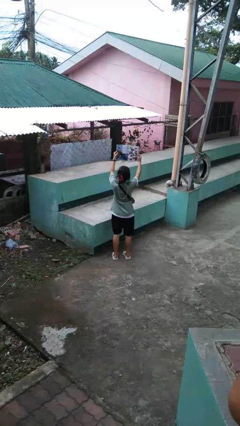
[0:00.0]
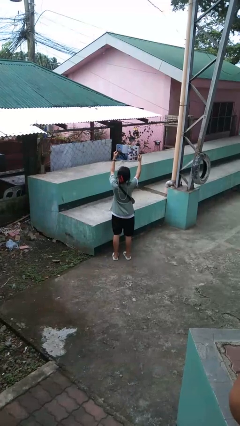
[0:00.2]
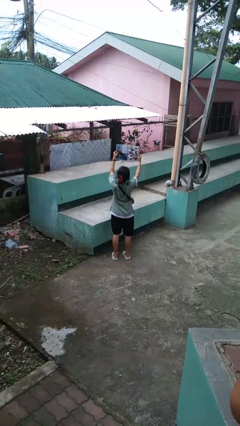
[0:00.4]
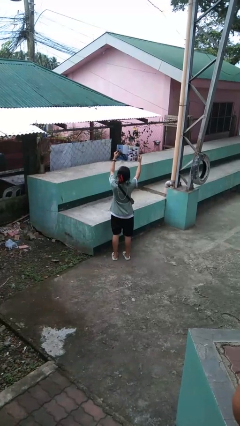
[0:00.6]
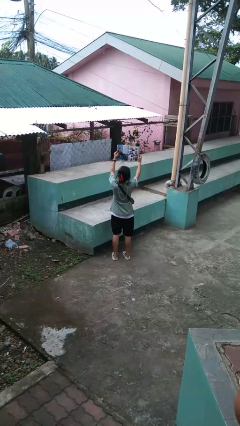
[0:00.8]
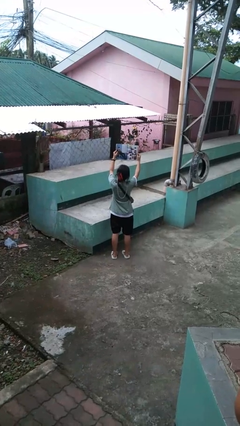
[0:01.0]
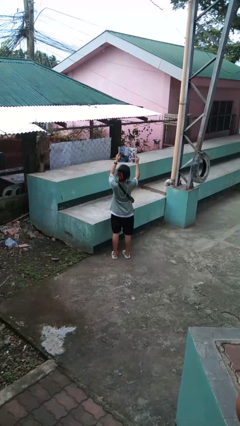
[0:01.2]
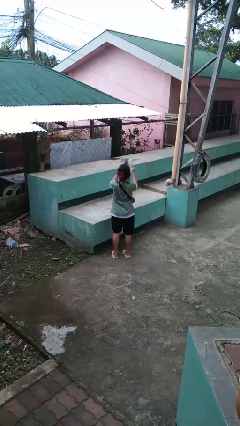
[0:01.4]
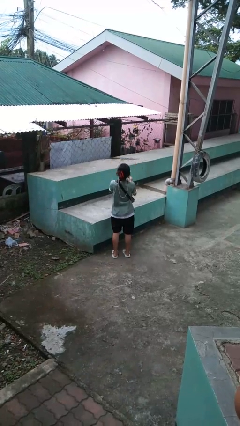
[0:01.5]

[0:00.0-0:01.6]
person reads magazine

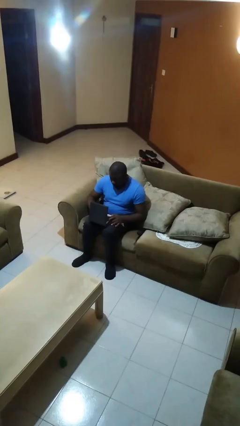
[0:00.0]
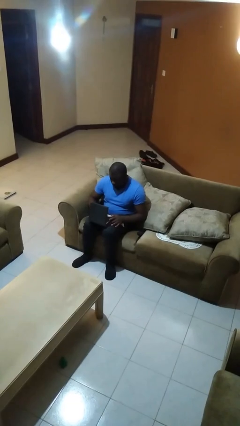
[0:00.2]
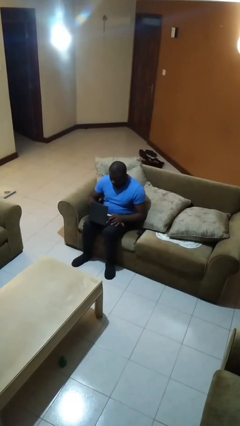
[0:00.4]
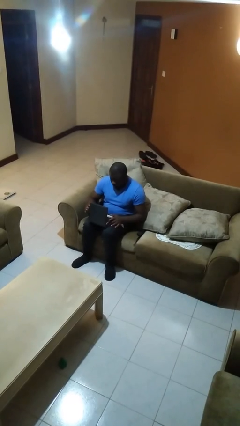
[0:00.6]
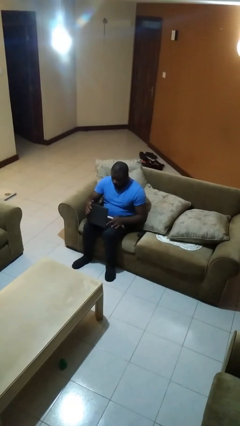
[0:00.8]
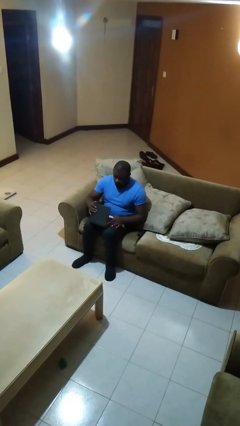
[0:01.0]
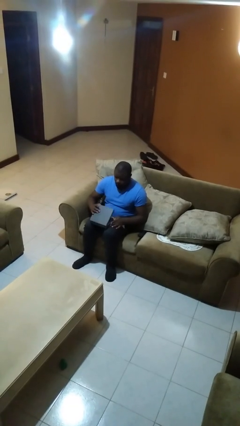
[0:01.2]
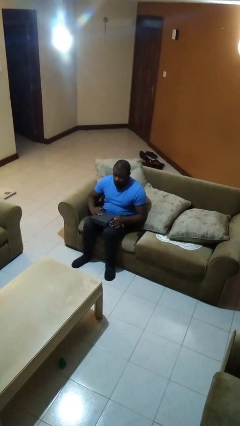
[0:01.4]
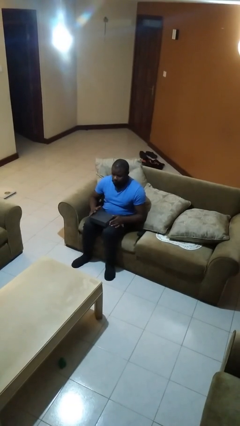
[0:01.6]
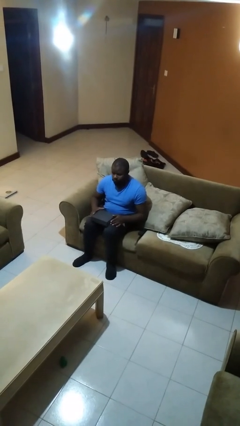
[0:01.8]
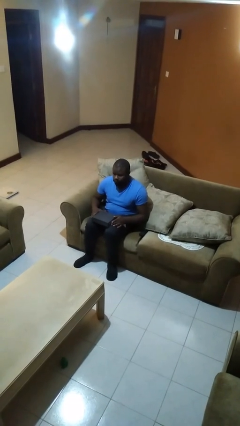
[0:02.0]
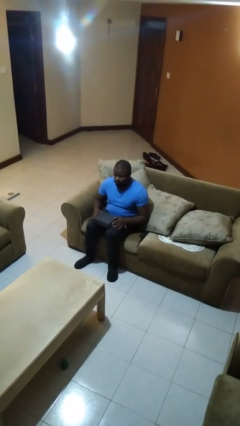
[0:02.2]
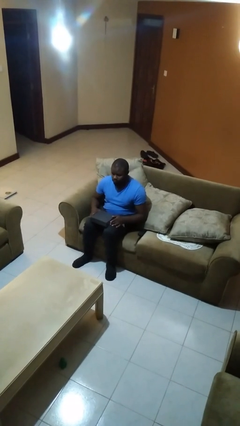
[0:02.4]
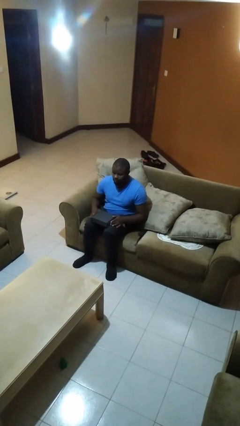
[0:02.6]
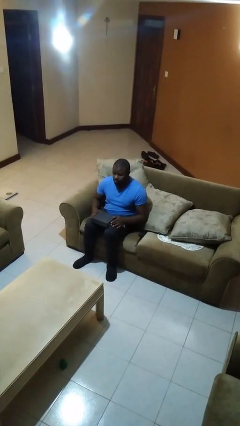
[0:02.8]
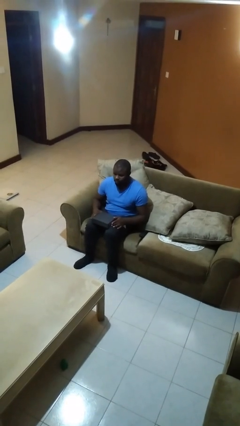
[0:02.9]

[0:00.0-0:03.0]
person closes jewelry box

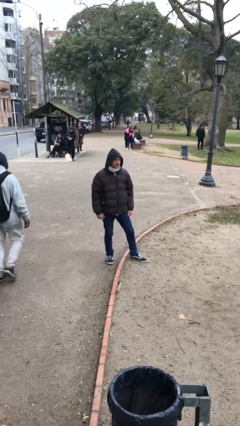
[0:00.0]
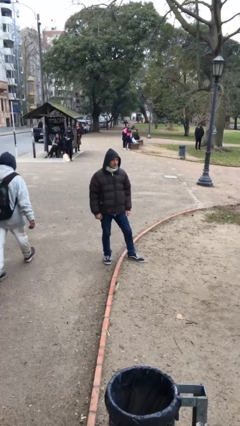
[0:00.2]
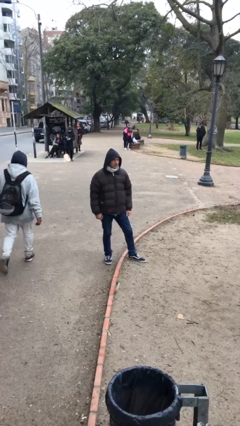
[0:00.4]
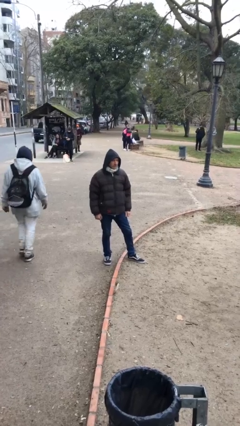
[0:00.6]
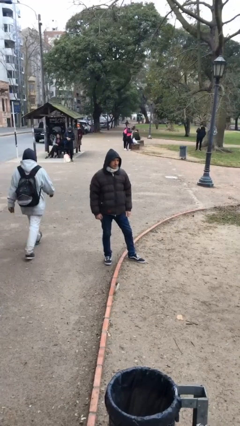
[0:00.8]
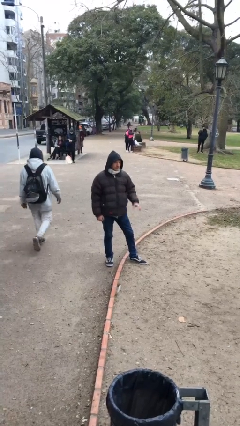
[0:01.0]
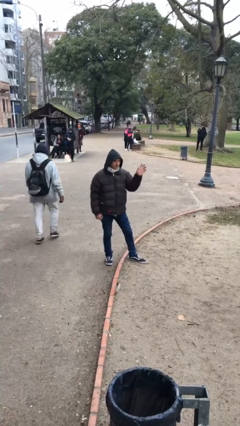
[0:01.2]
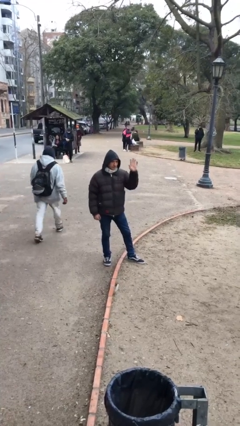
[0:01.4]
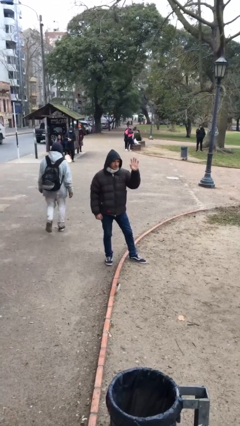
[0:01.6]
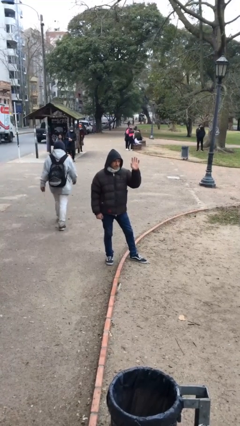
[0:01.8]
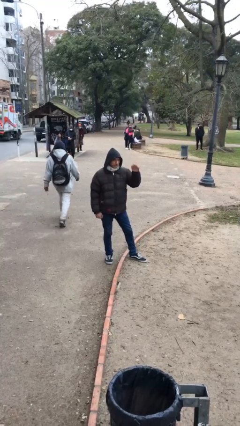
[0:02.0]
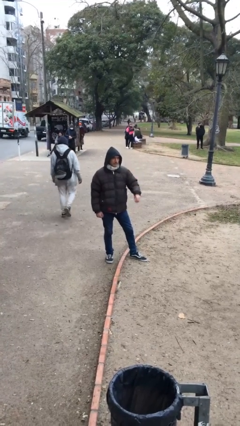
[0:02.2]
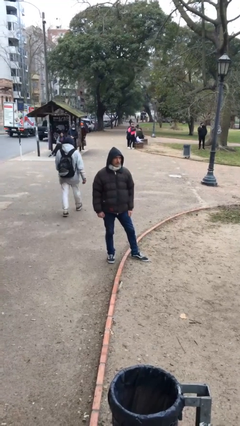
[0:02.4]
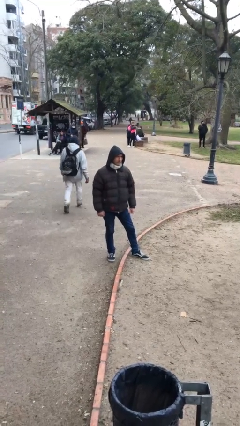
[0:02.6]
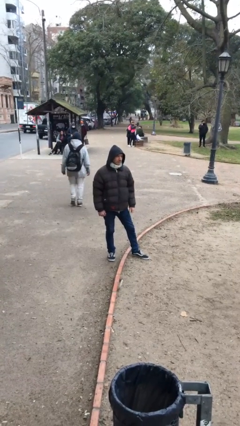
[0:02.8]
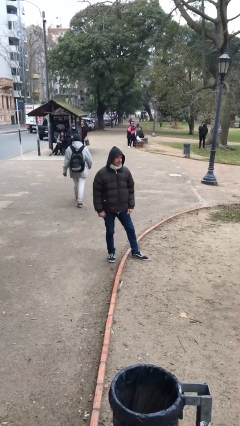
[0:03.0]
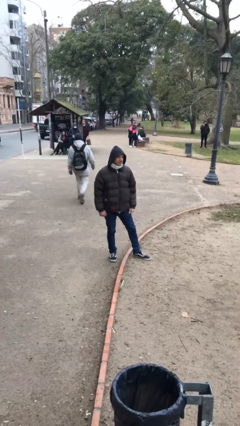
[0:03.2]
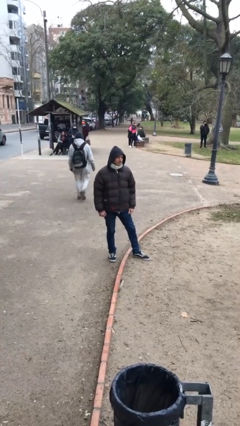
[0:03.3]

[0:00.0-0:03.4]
person waves at person

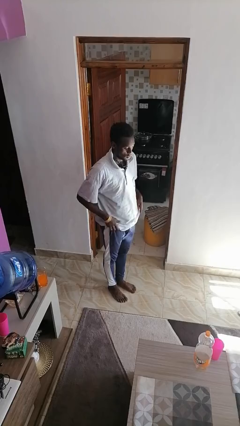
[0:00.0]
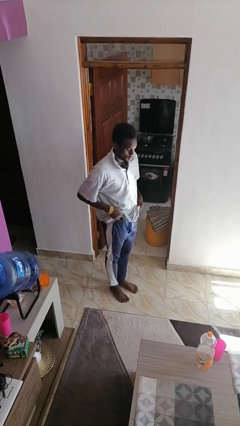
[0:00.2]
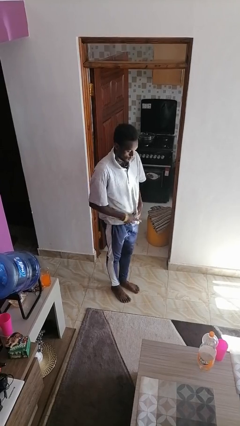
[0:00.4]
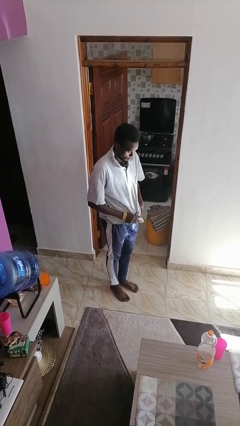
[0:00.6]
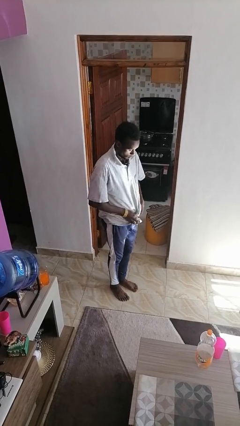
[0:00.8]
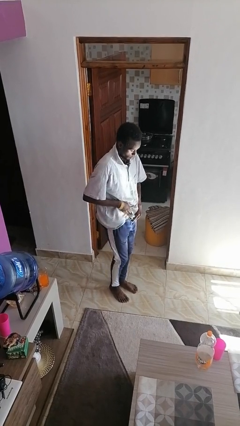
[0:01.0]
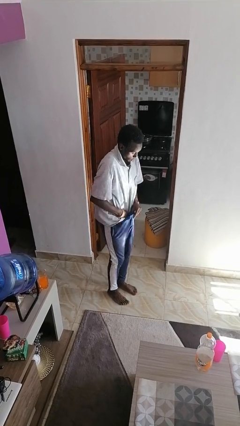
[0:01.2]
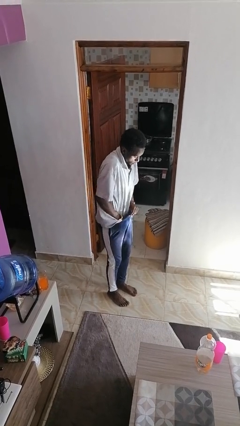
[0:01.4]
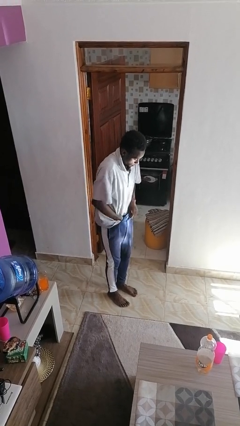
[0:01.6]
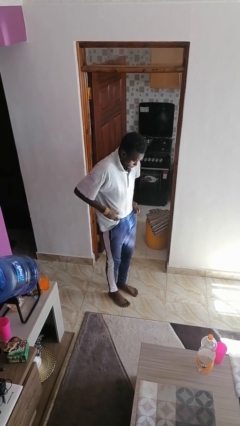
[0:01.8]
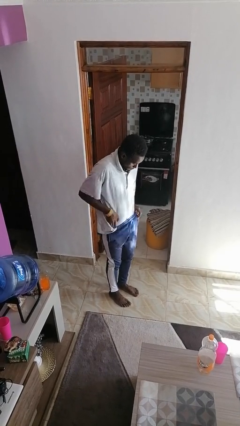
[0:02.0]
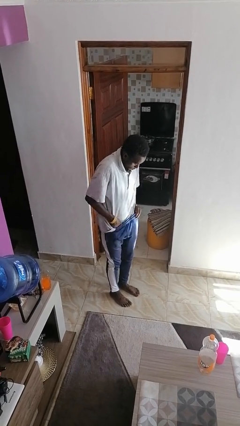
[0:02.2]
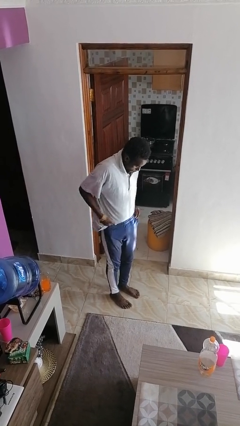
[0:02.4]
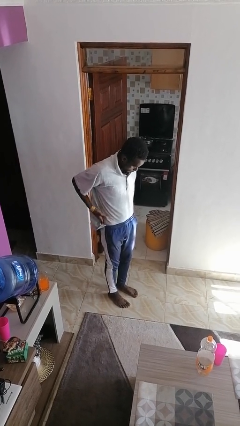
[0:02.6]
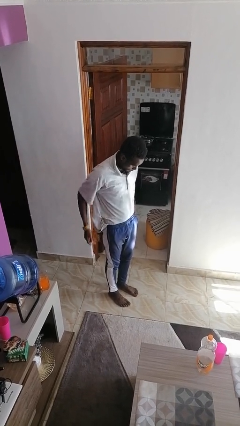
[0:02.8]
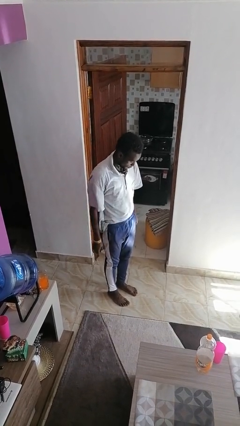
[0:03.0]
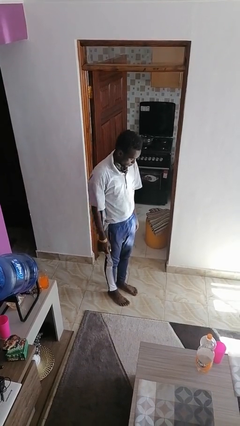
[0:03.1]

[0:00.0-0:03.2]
person tucks in shirt

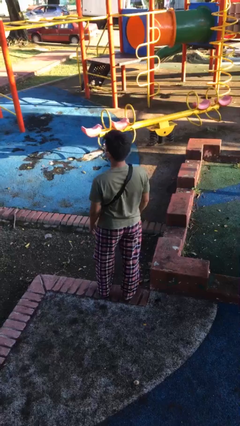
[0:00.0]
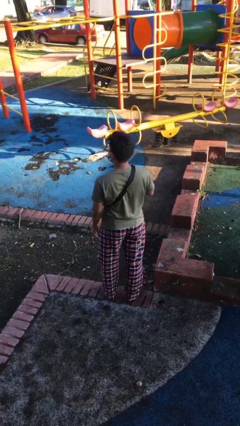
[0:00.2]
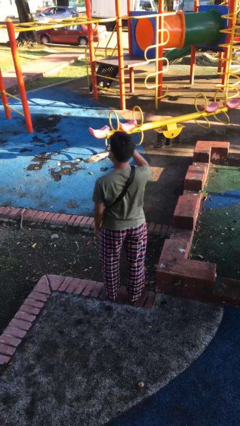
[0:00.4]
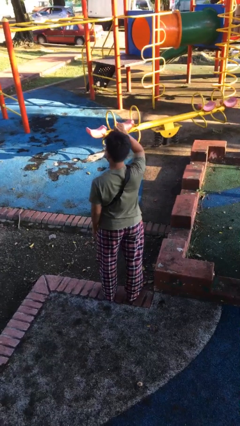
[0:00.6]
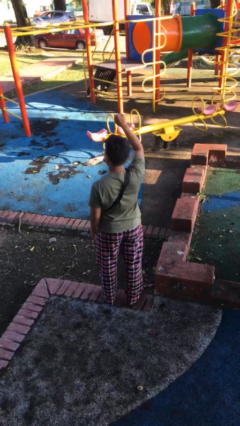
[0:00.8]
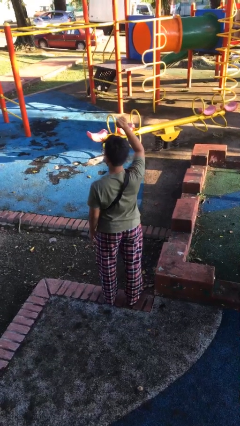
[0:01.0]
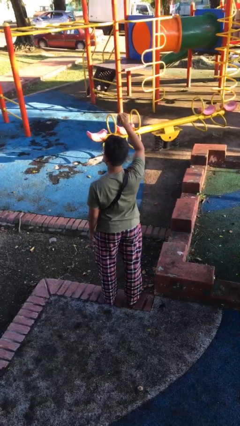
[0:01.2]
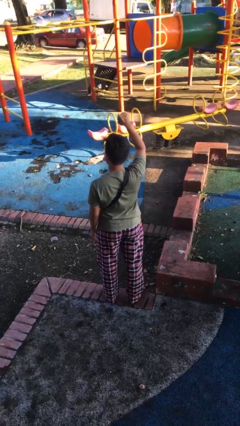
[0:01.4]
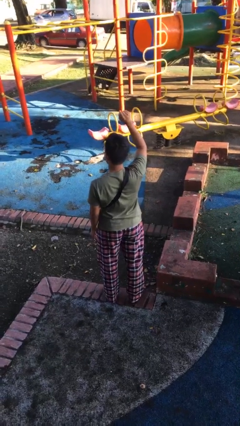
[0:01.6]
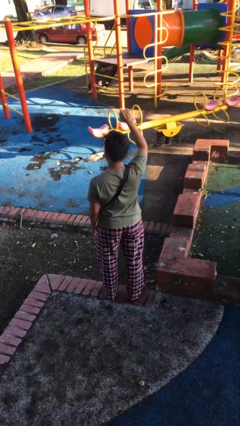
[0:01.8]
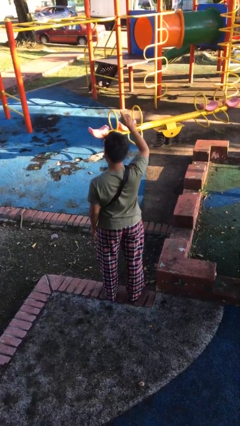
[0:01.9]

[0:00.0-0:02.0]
person gestures number one

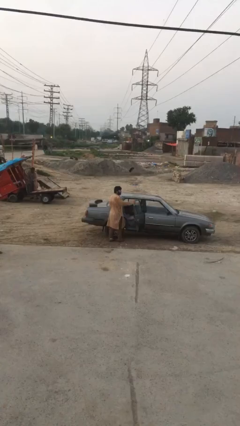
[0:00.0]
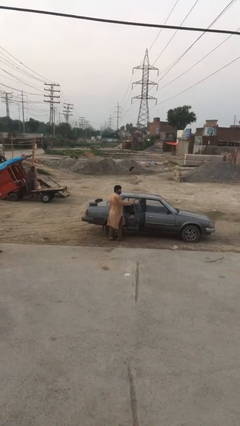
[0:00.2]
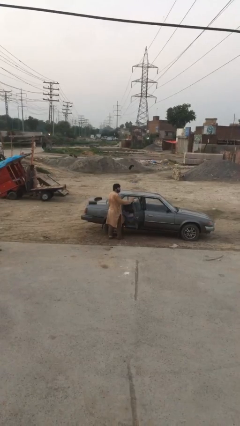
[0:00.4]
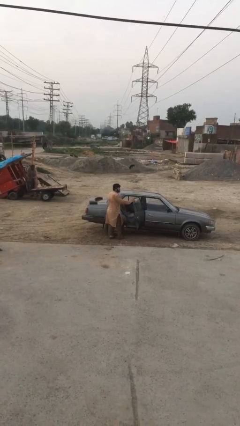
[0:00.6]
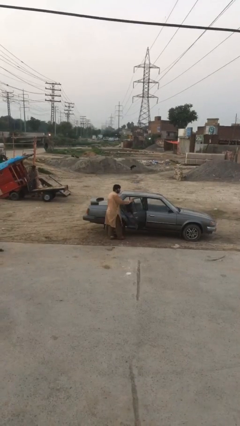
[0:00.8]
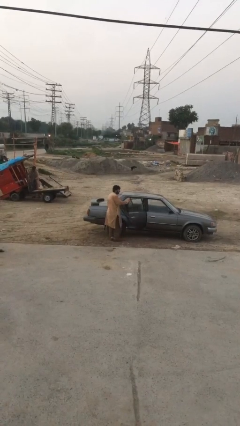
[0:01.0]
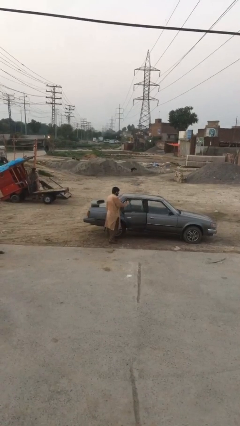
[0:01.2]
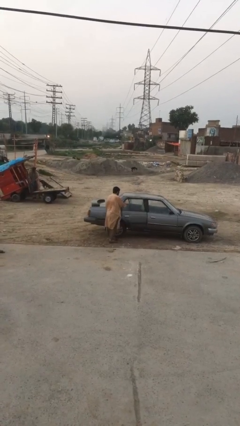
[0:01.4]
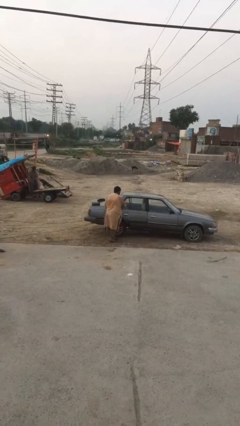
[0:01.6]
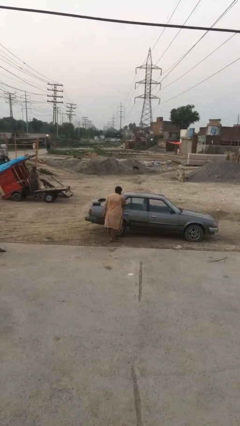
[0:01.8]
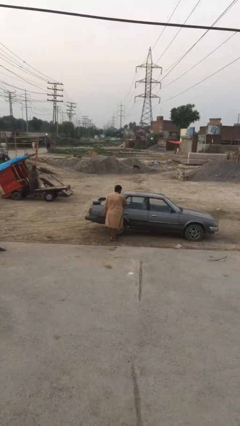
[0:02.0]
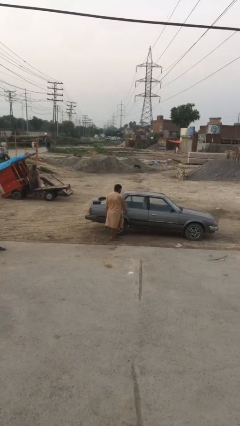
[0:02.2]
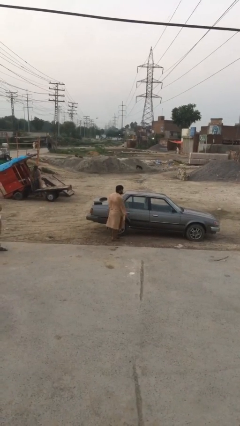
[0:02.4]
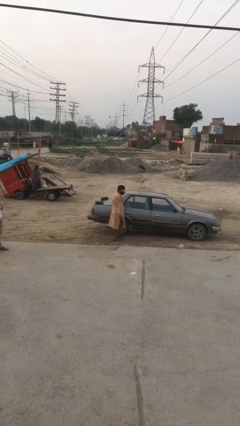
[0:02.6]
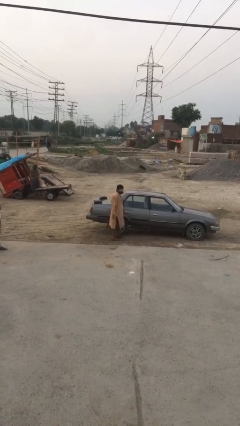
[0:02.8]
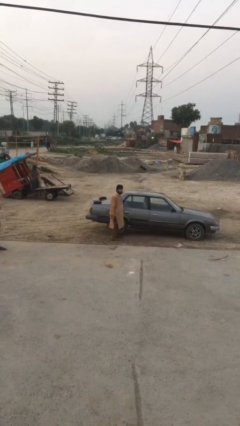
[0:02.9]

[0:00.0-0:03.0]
person closes car door

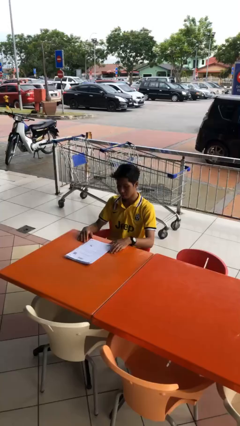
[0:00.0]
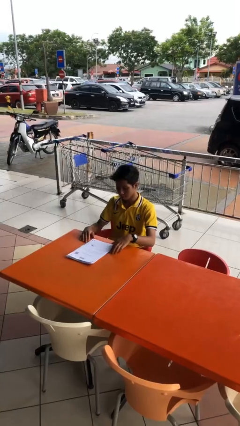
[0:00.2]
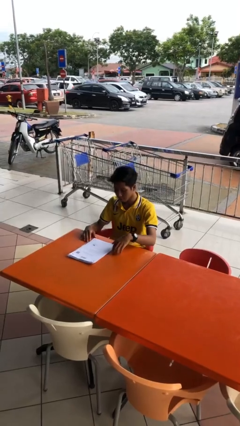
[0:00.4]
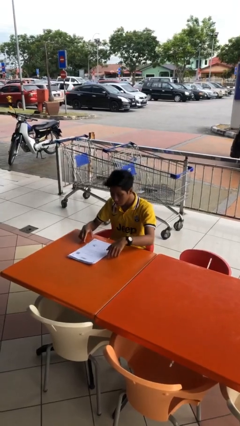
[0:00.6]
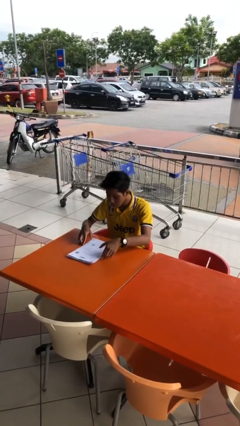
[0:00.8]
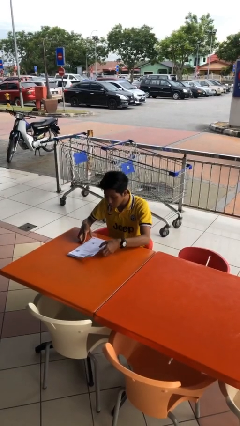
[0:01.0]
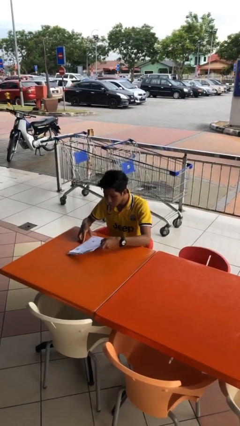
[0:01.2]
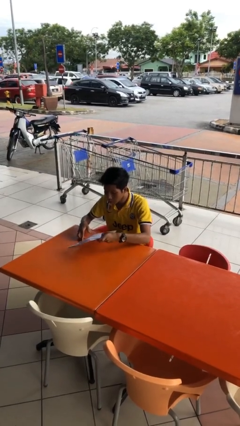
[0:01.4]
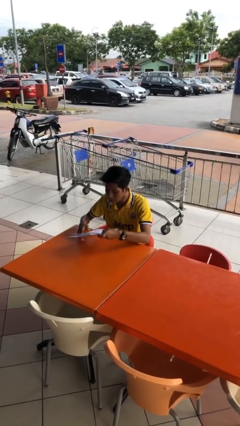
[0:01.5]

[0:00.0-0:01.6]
person picks up object from table
